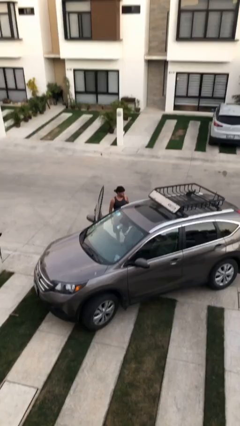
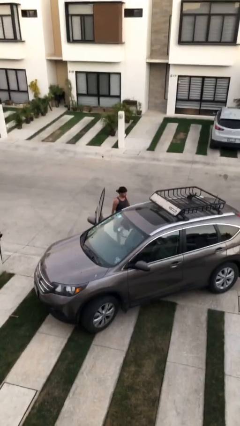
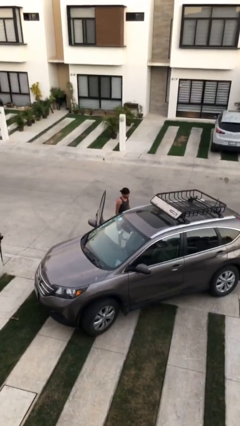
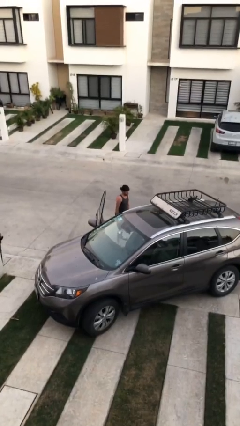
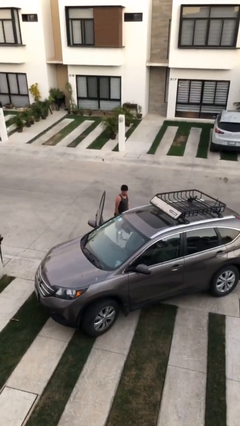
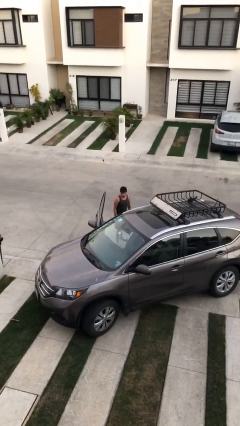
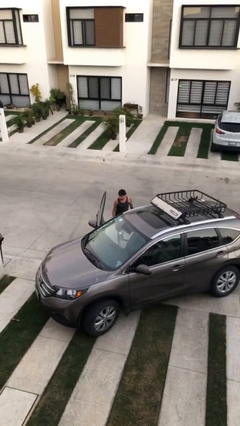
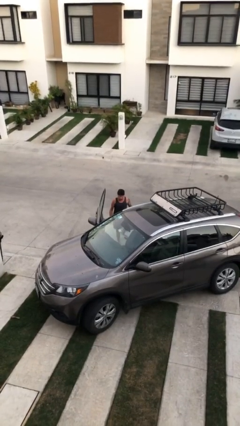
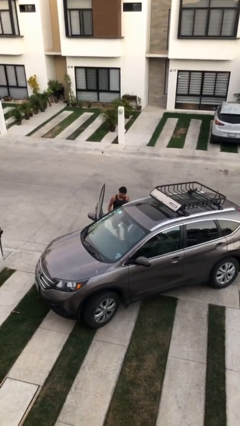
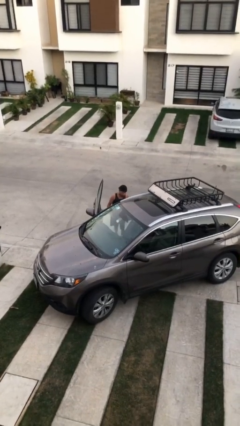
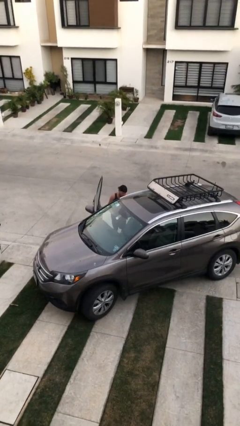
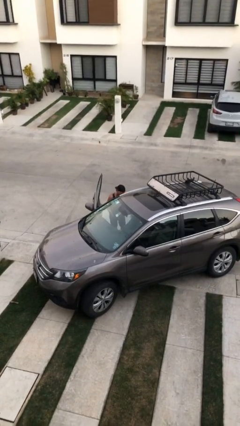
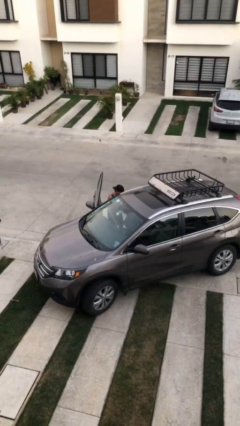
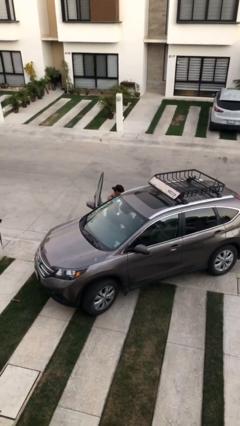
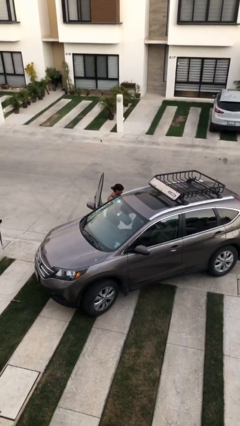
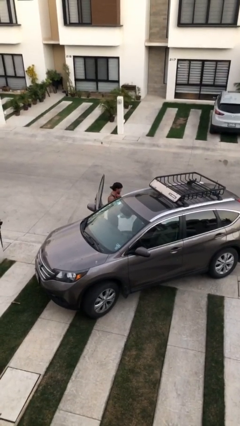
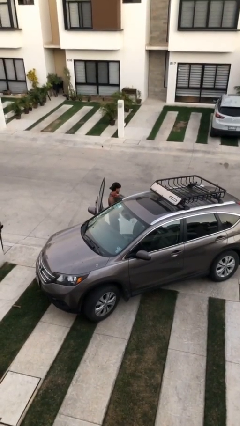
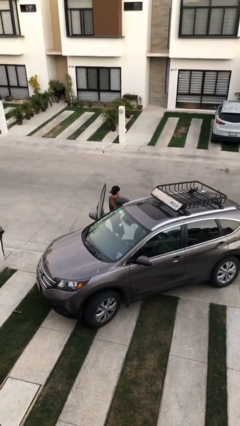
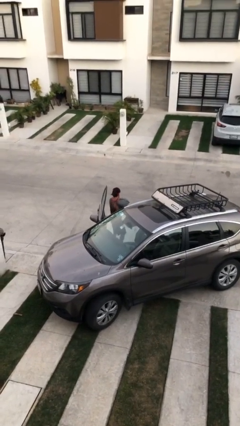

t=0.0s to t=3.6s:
person unloads car

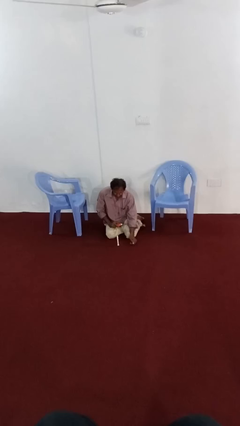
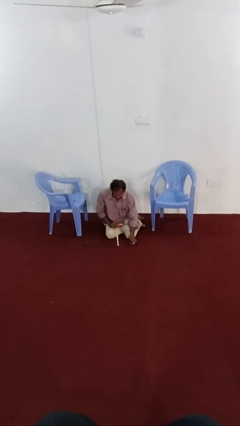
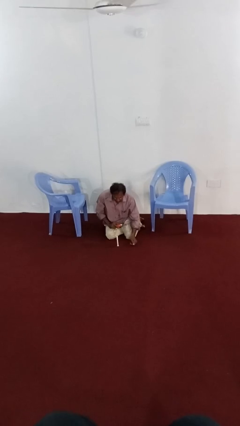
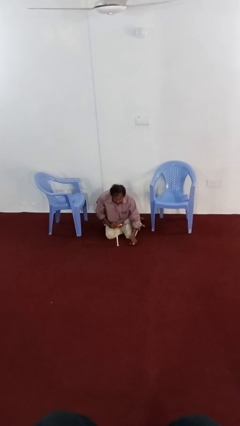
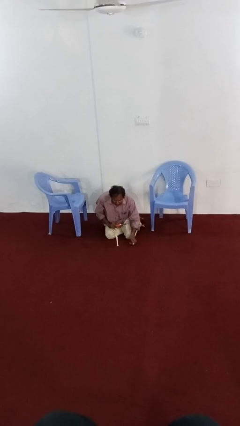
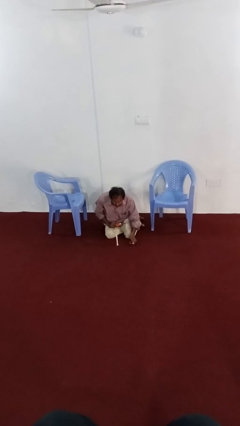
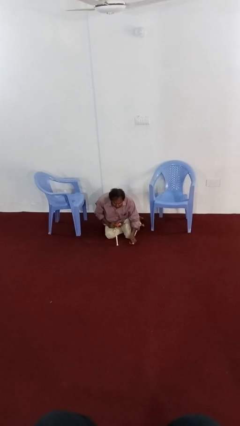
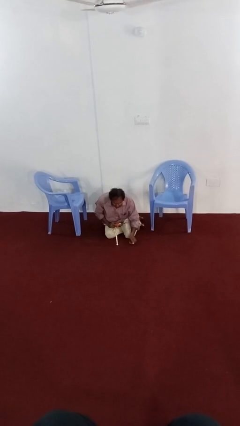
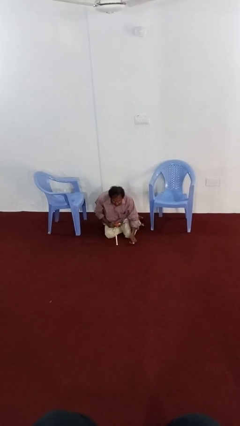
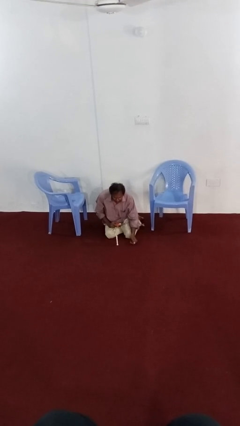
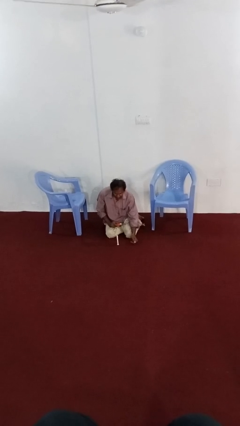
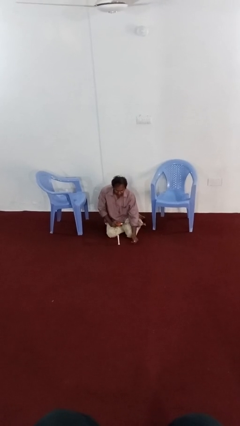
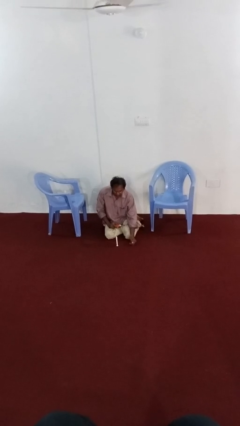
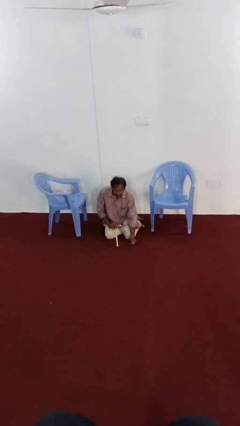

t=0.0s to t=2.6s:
person extinguishes candle

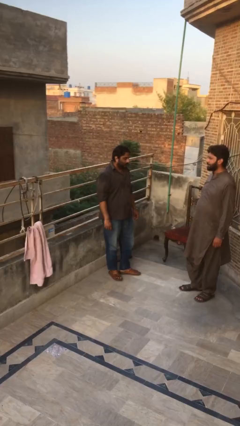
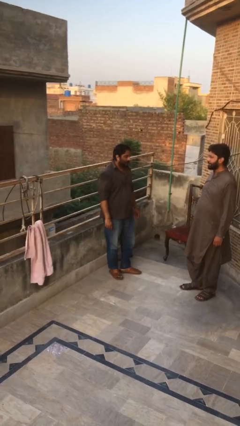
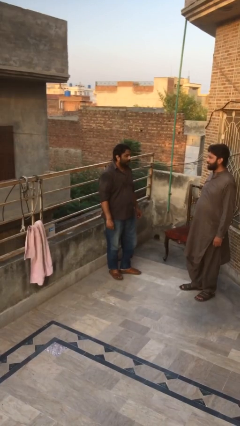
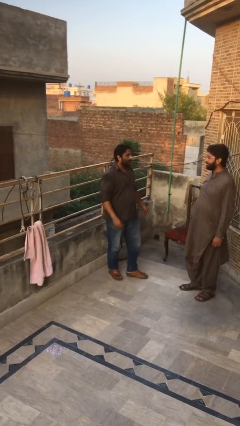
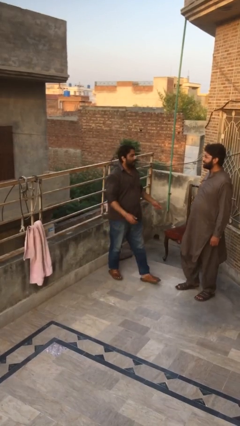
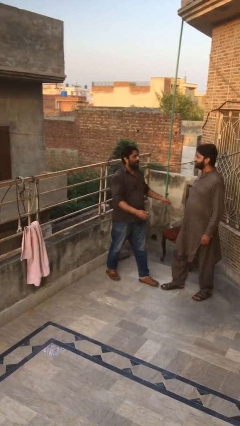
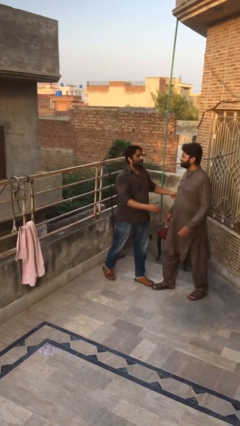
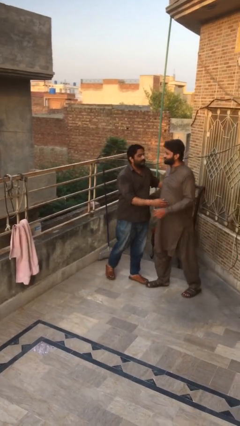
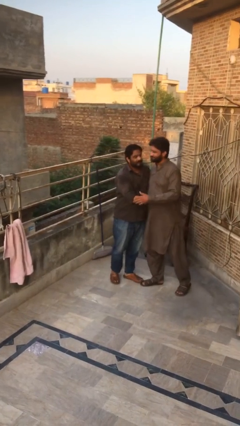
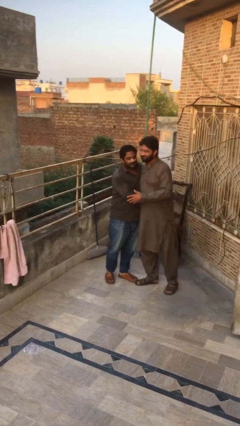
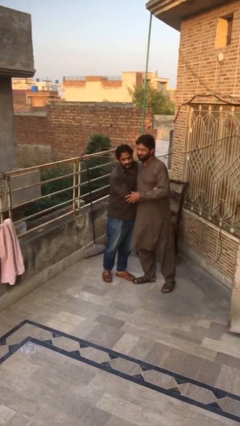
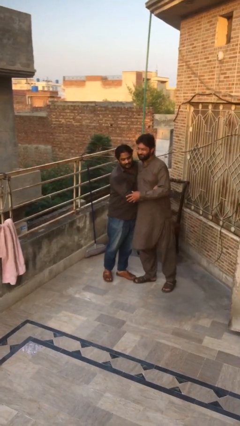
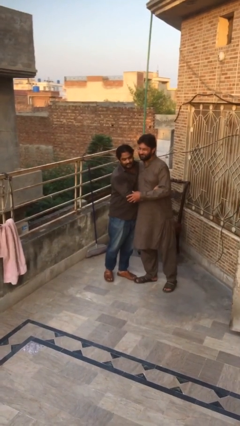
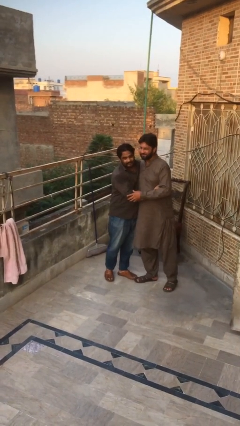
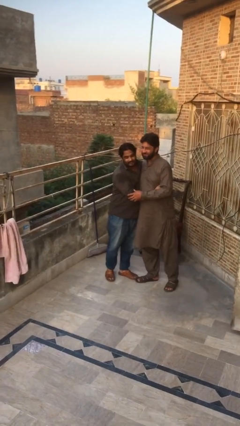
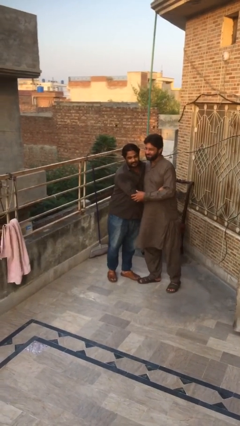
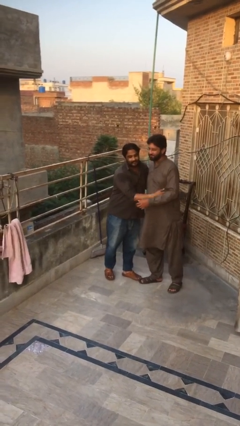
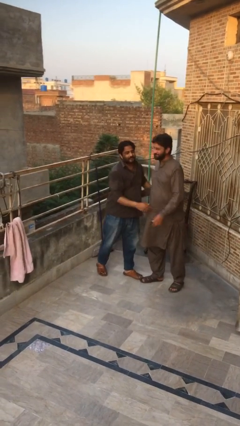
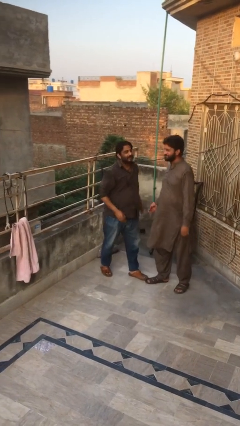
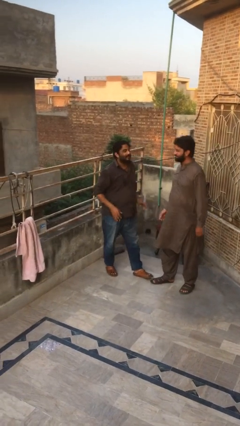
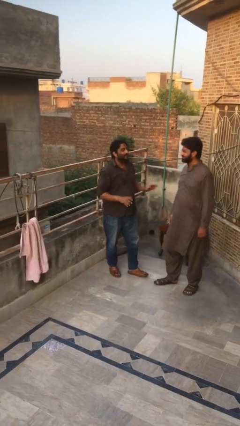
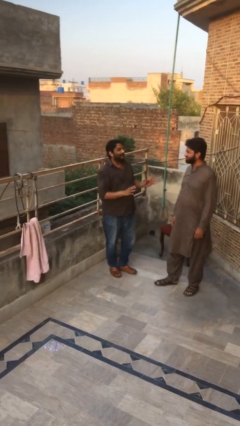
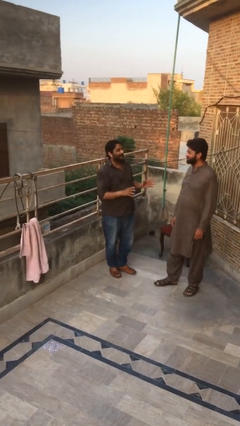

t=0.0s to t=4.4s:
person embraces person

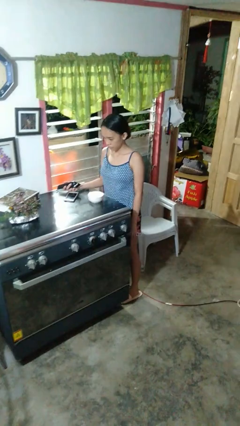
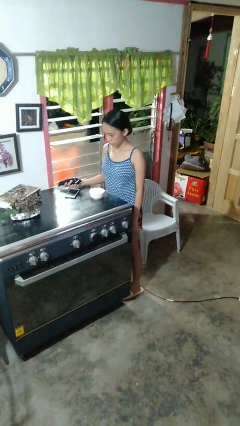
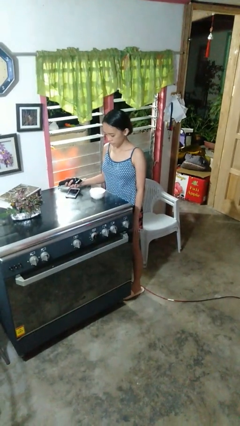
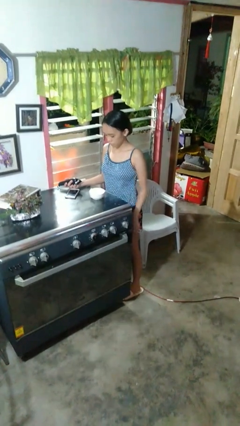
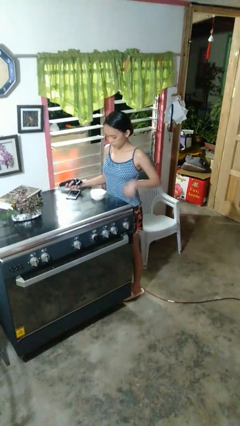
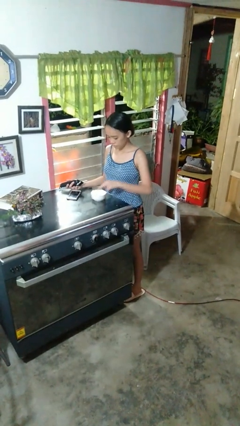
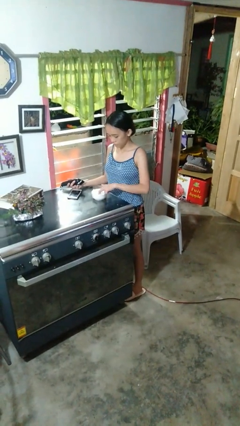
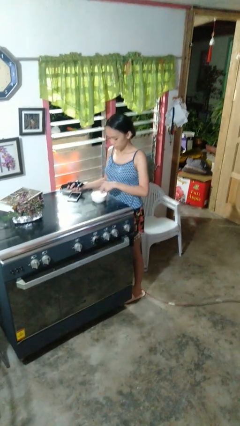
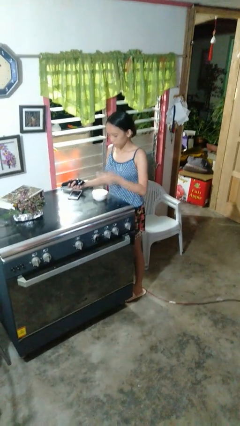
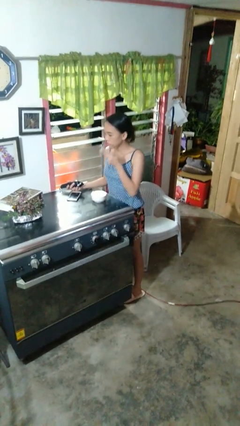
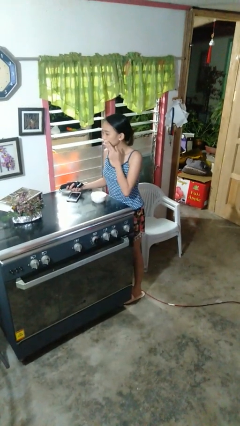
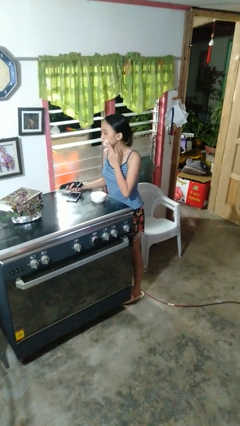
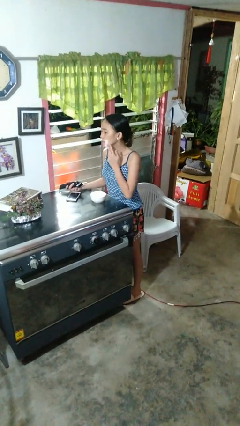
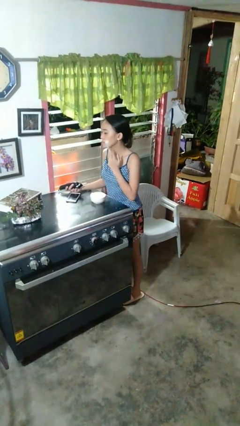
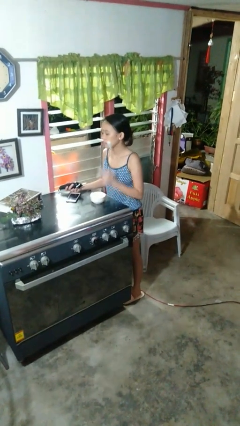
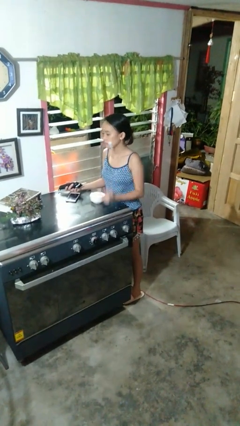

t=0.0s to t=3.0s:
person applies shaving cream

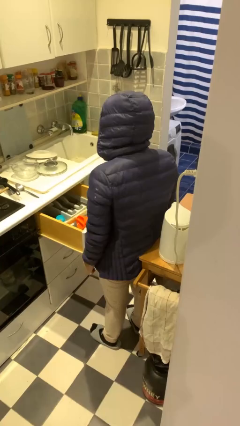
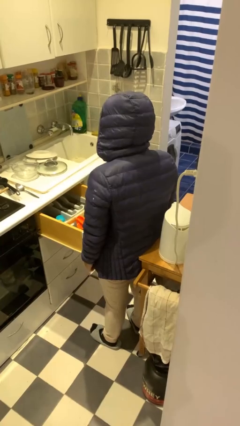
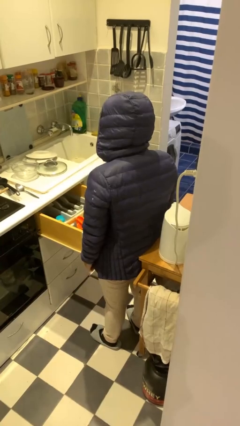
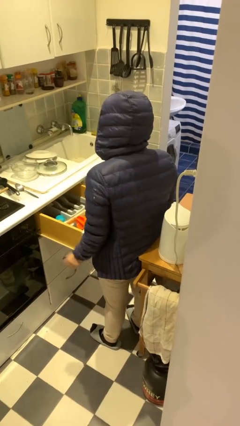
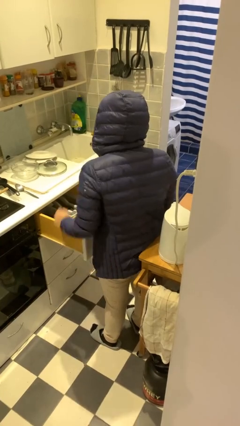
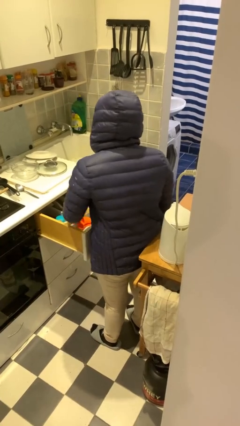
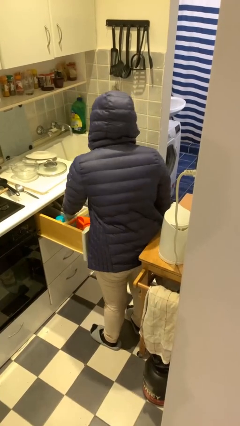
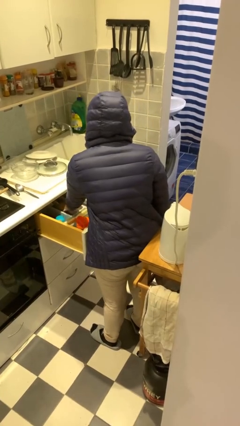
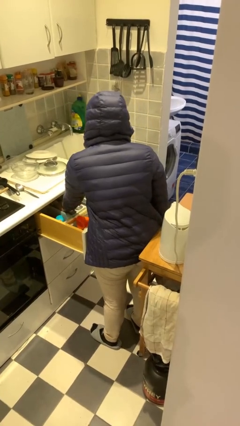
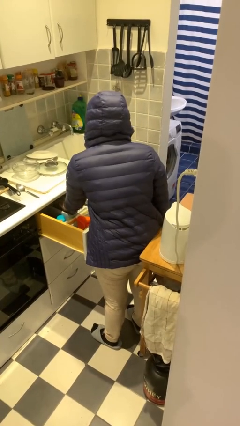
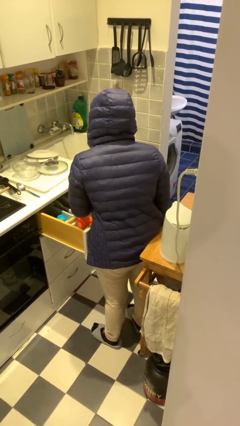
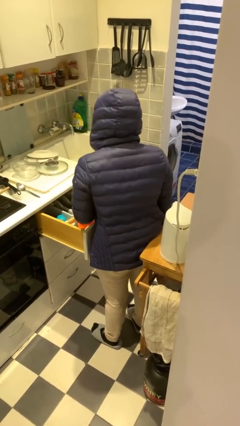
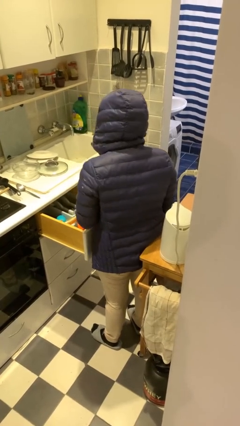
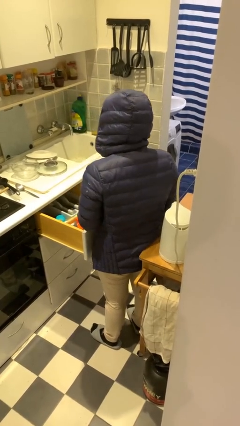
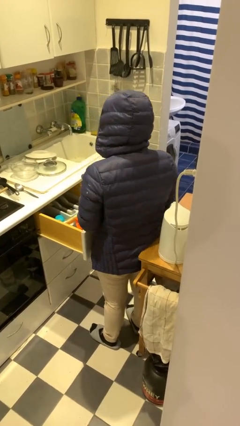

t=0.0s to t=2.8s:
person takes object from kitchen drawer

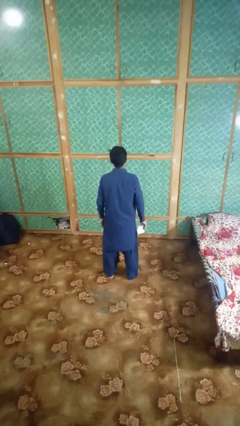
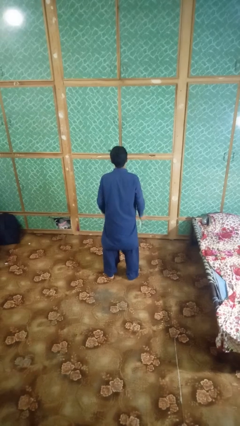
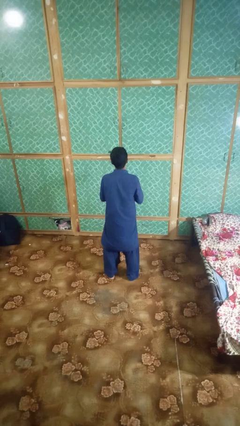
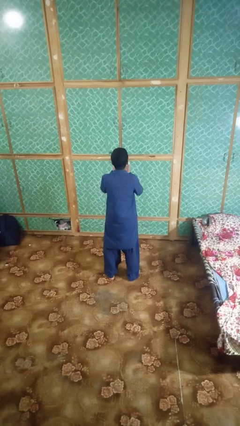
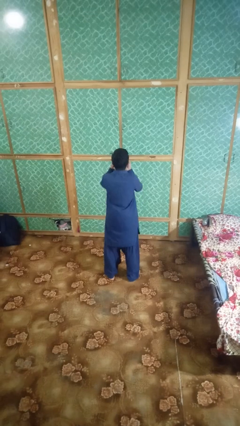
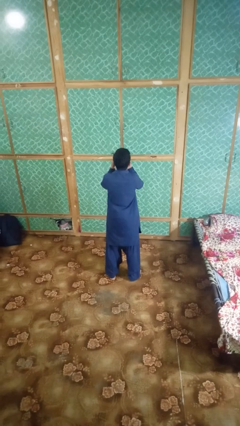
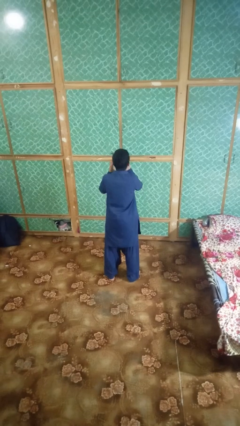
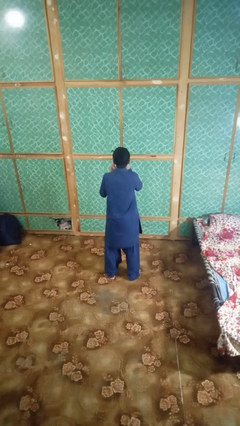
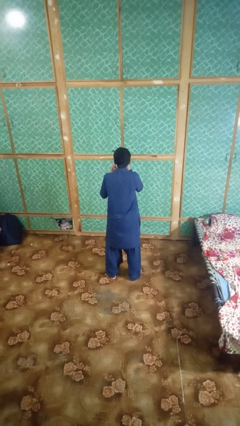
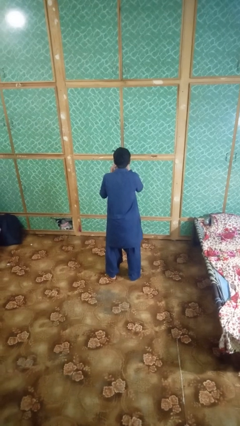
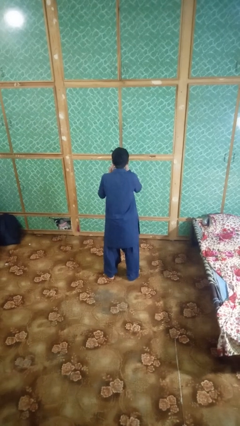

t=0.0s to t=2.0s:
person blows nose
